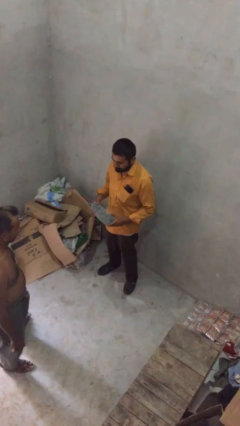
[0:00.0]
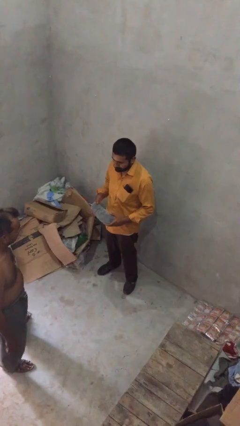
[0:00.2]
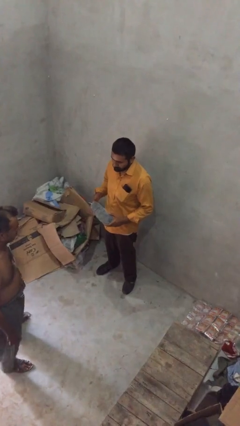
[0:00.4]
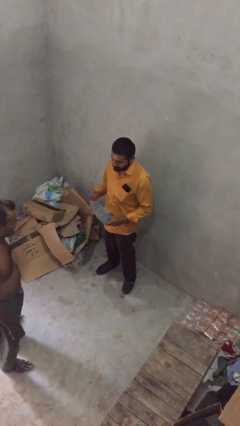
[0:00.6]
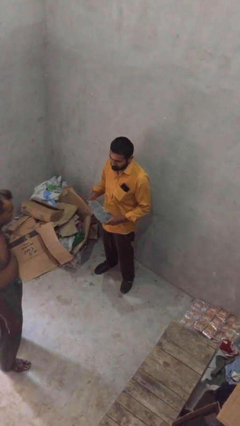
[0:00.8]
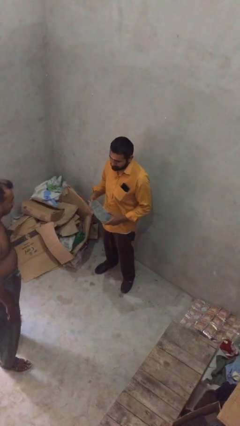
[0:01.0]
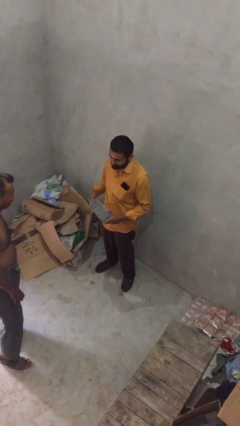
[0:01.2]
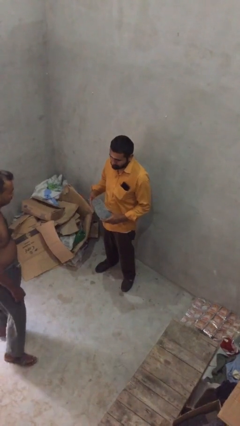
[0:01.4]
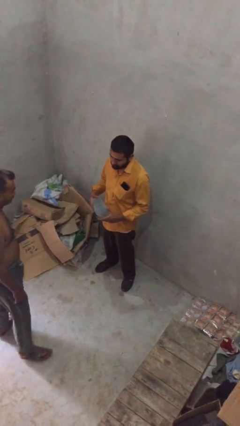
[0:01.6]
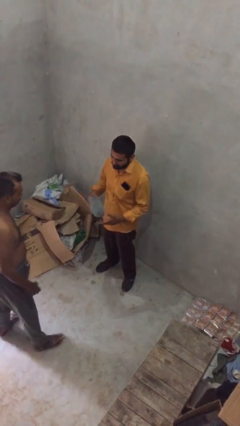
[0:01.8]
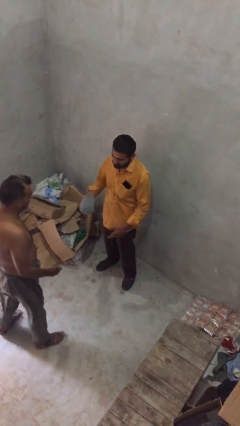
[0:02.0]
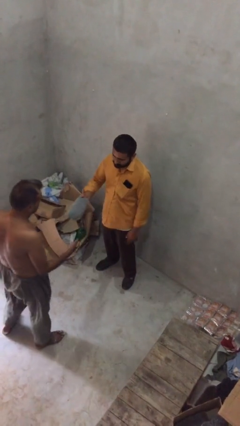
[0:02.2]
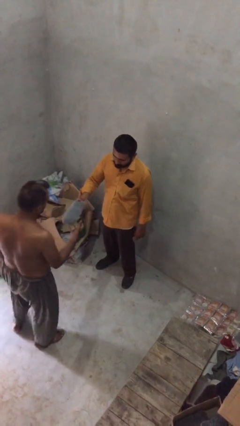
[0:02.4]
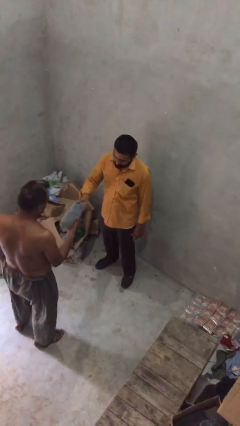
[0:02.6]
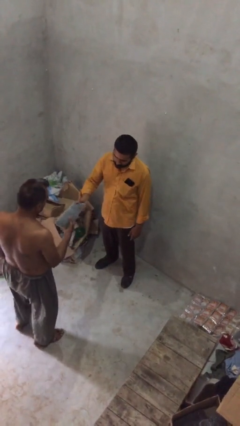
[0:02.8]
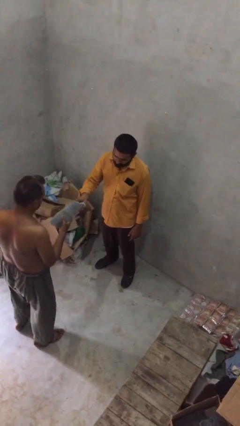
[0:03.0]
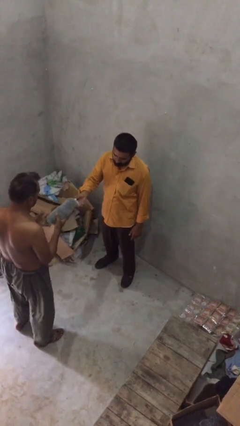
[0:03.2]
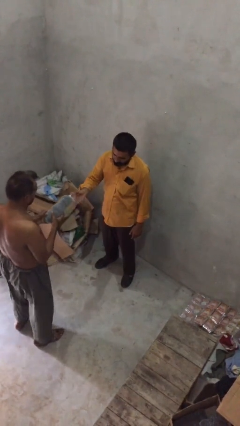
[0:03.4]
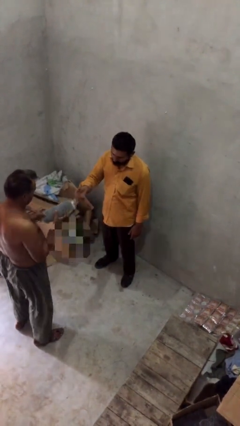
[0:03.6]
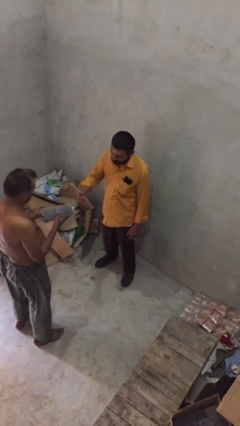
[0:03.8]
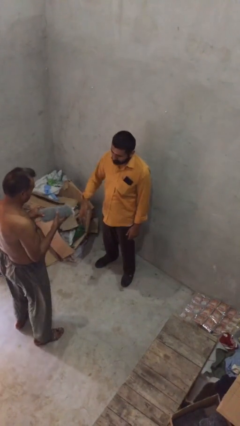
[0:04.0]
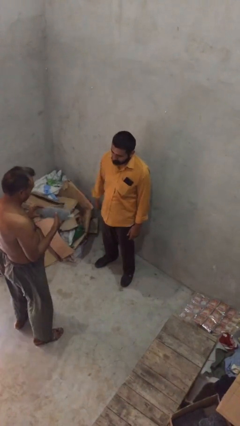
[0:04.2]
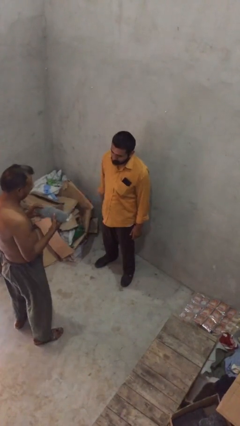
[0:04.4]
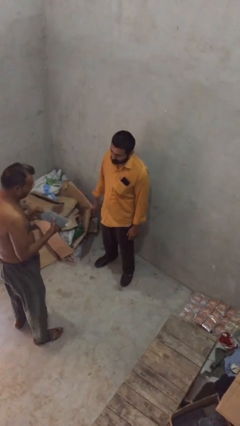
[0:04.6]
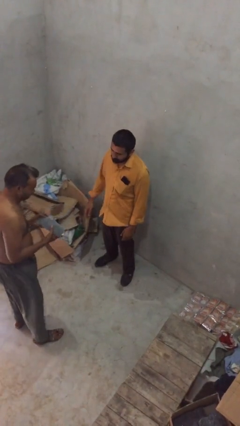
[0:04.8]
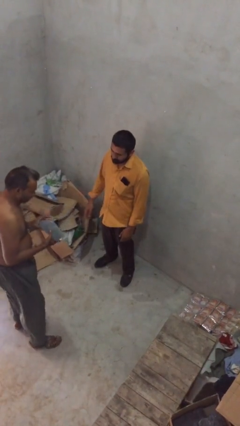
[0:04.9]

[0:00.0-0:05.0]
person transfers object to person

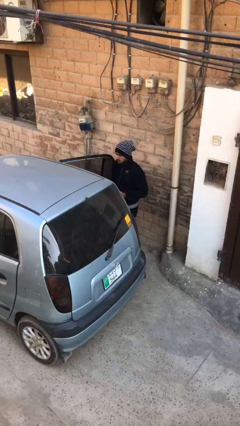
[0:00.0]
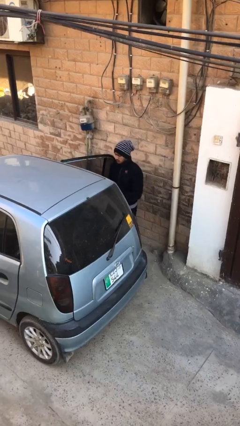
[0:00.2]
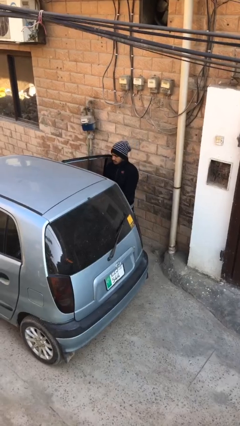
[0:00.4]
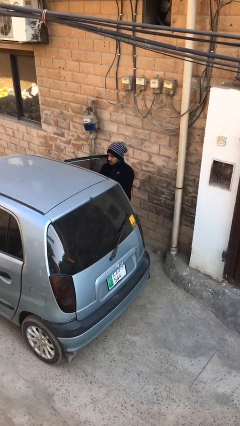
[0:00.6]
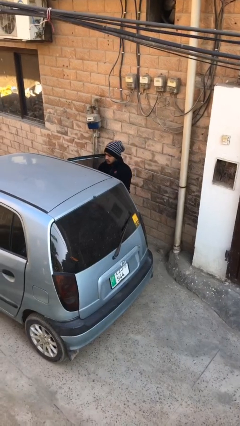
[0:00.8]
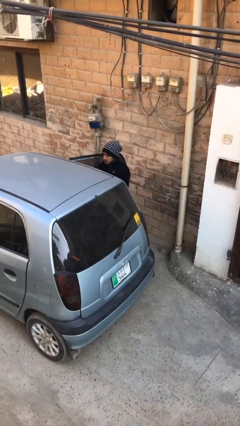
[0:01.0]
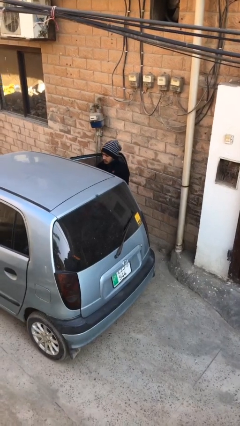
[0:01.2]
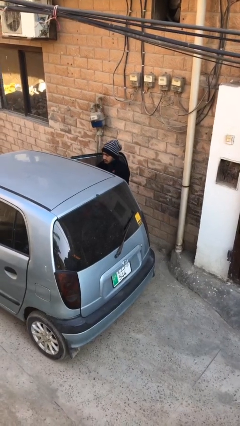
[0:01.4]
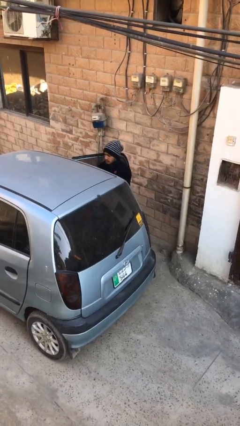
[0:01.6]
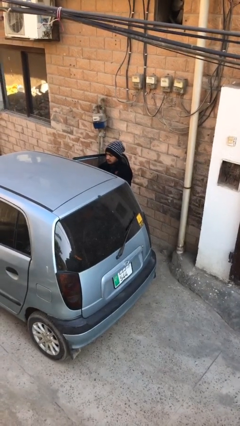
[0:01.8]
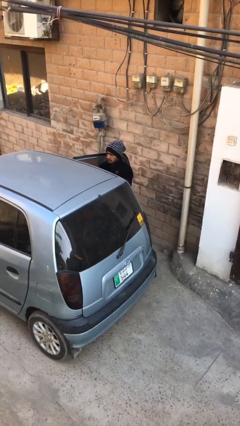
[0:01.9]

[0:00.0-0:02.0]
person loads car

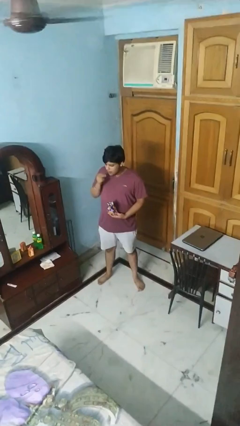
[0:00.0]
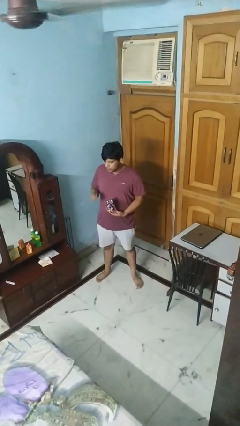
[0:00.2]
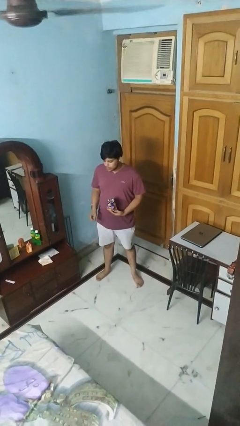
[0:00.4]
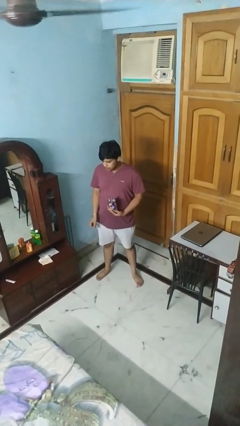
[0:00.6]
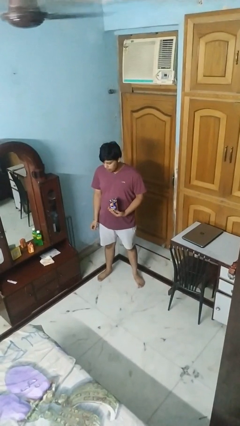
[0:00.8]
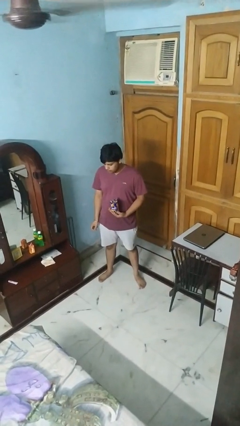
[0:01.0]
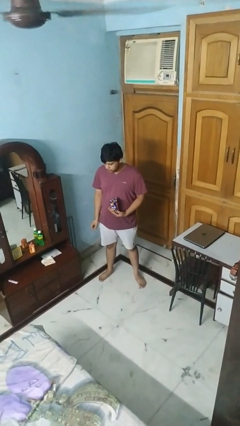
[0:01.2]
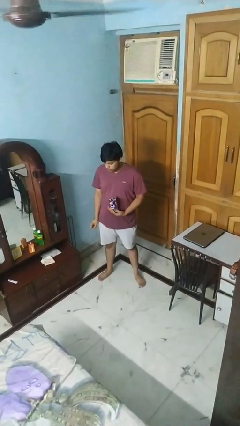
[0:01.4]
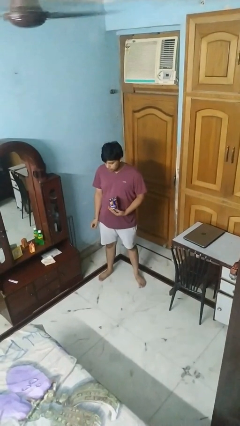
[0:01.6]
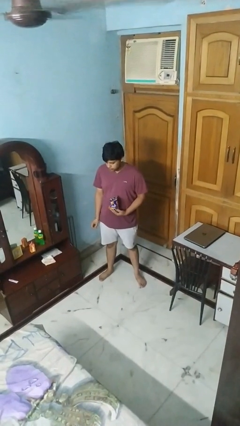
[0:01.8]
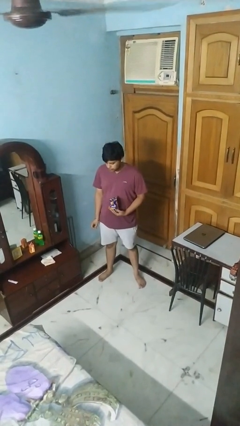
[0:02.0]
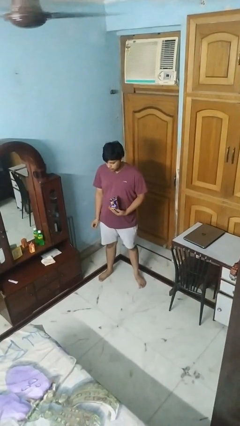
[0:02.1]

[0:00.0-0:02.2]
person eats snack from bag

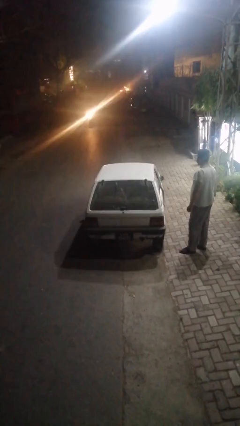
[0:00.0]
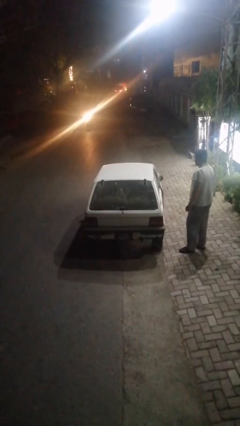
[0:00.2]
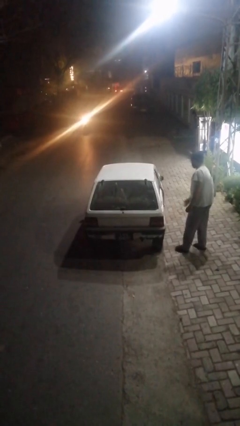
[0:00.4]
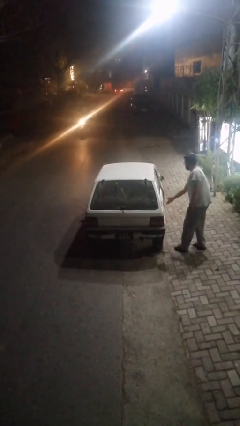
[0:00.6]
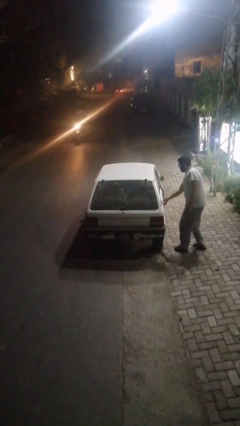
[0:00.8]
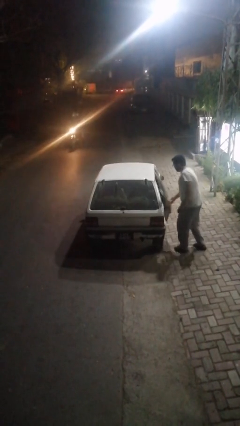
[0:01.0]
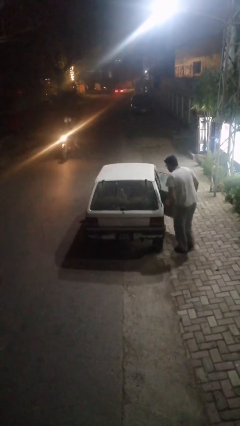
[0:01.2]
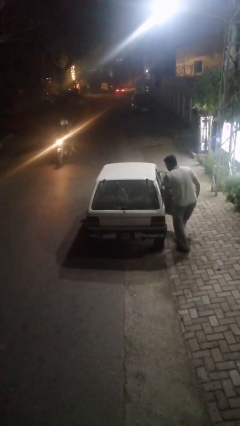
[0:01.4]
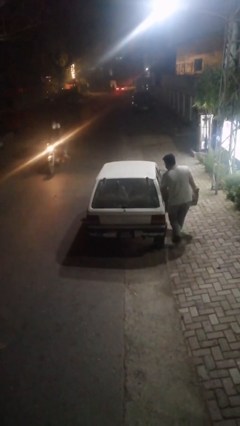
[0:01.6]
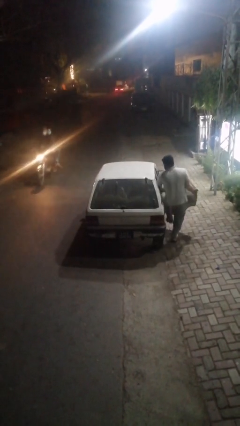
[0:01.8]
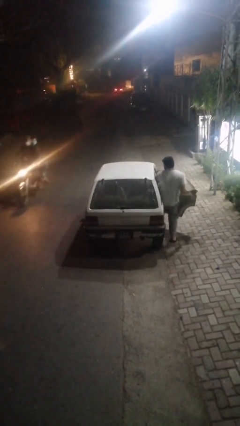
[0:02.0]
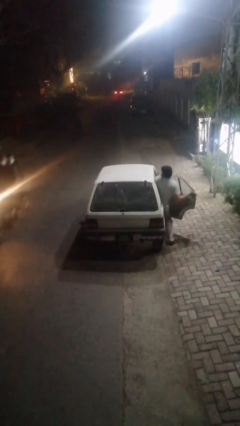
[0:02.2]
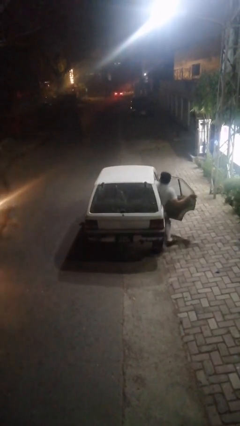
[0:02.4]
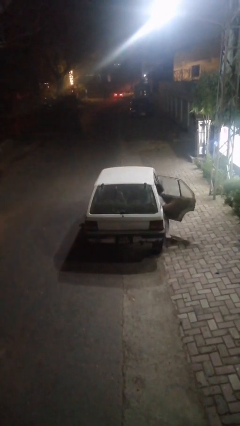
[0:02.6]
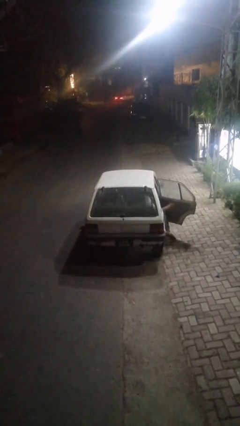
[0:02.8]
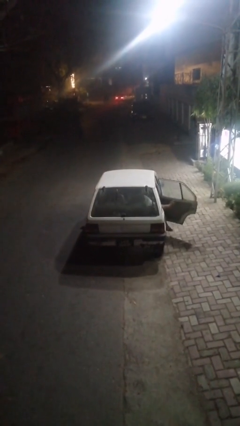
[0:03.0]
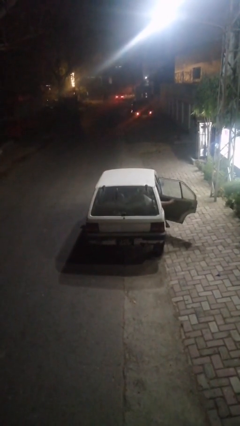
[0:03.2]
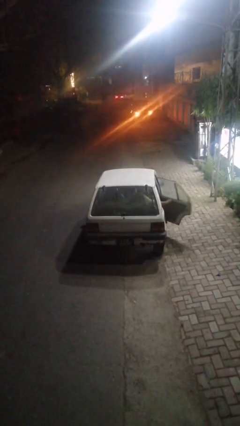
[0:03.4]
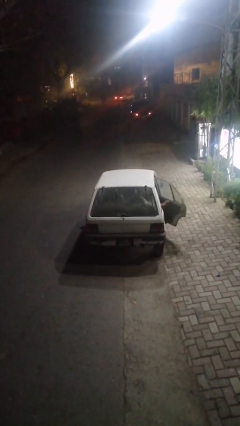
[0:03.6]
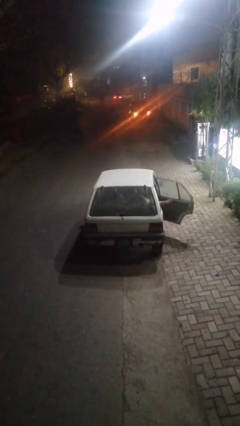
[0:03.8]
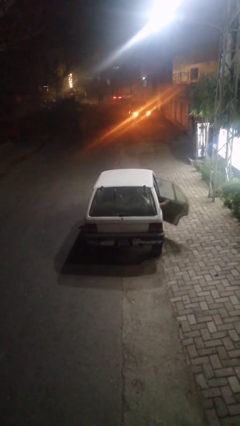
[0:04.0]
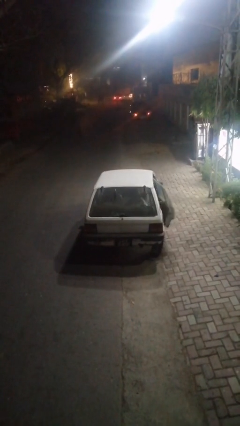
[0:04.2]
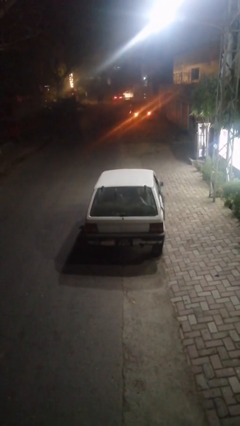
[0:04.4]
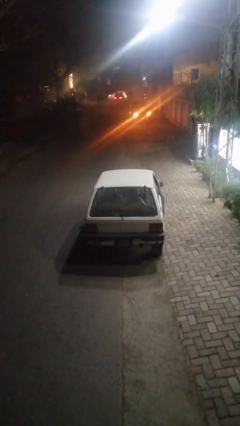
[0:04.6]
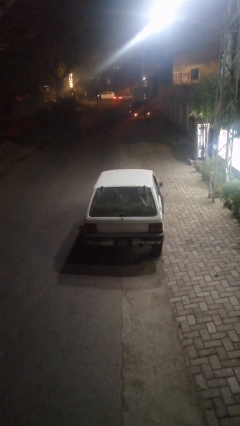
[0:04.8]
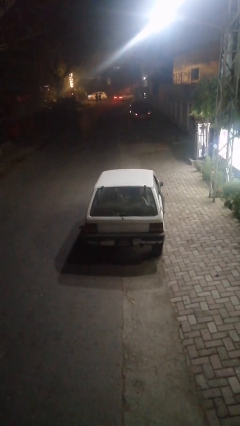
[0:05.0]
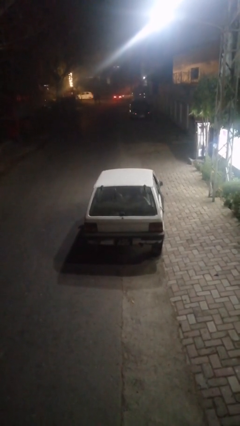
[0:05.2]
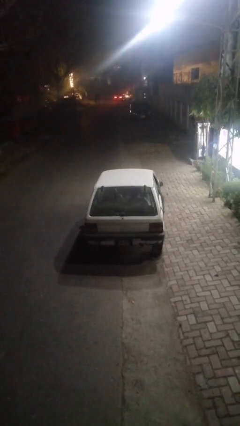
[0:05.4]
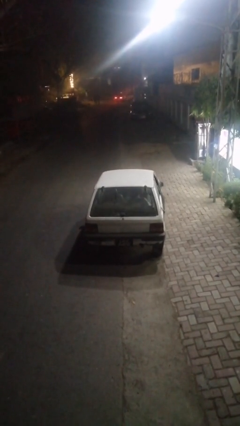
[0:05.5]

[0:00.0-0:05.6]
car picks up person

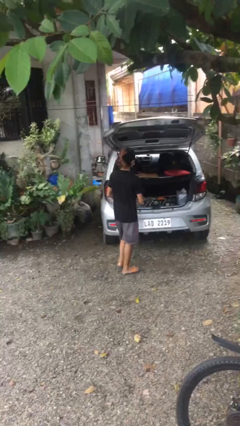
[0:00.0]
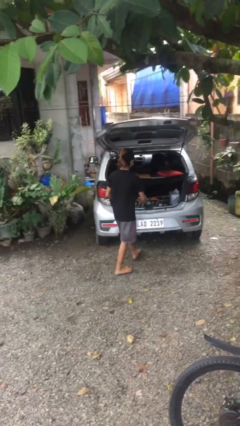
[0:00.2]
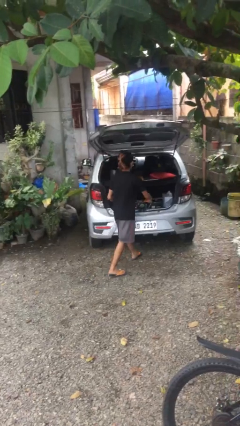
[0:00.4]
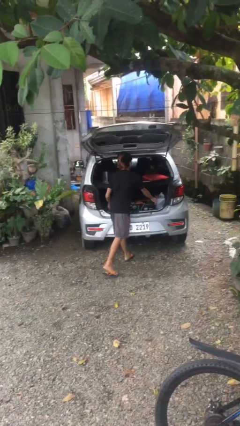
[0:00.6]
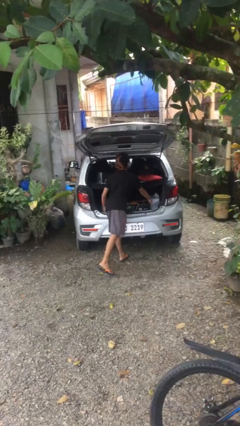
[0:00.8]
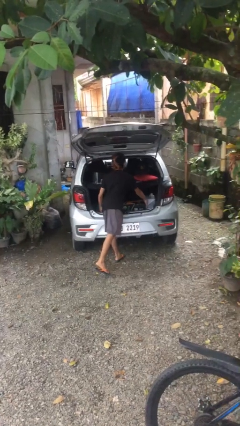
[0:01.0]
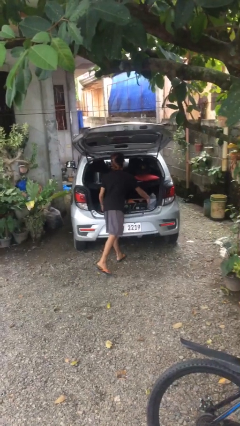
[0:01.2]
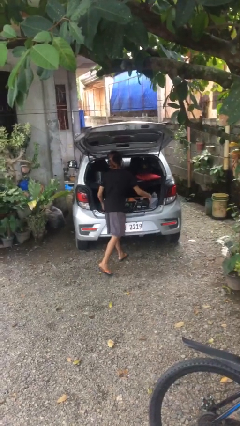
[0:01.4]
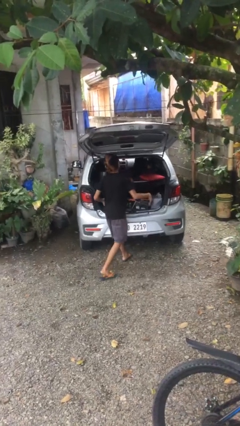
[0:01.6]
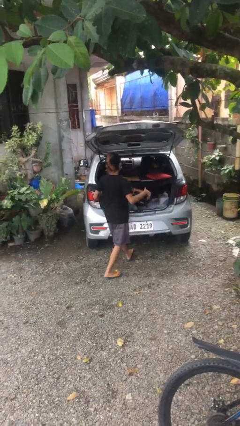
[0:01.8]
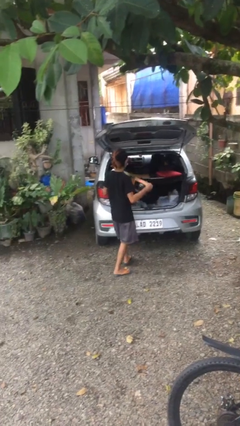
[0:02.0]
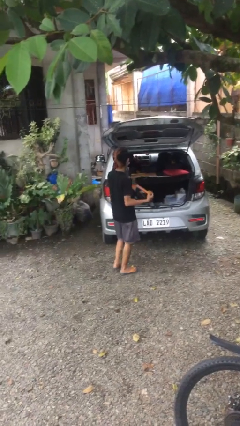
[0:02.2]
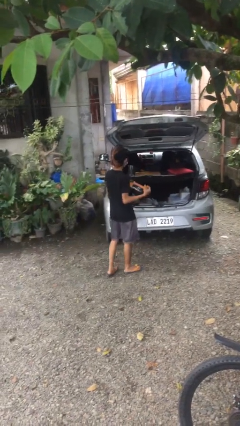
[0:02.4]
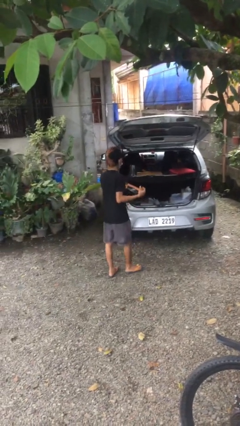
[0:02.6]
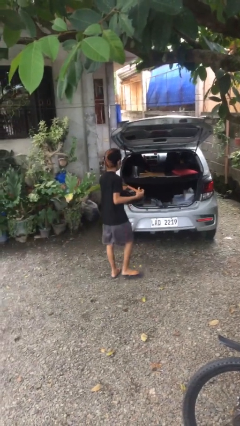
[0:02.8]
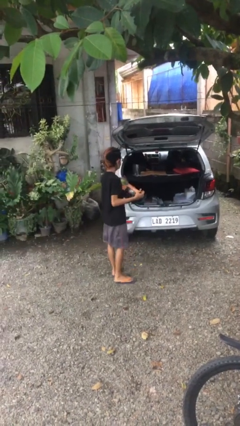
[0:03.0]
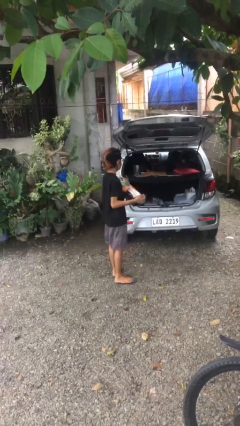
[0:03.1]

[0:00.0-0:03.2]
person unloads car
